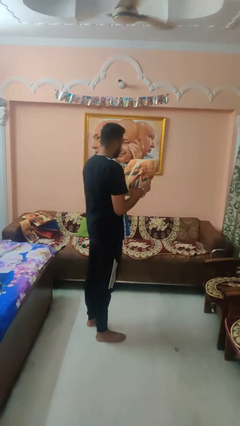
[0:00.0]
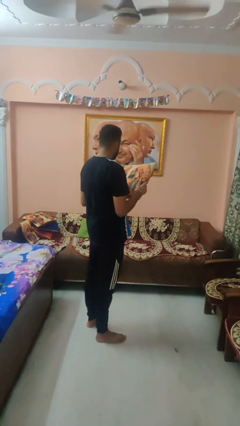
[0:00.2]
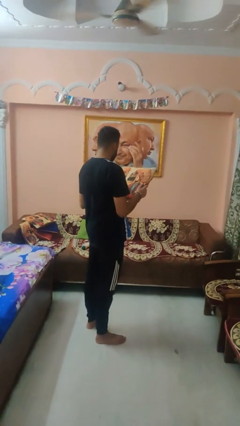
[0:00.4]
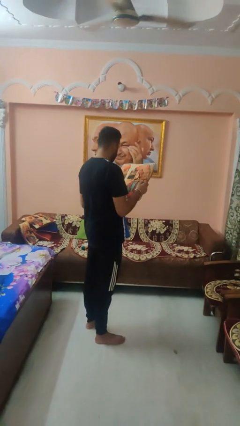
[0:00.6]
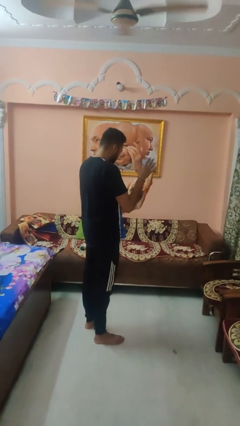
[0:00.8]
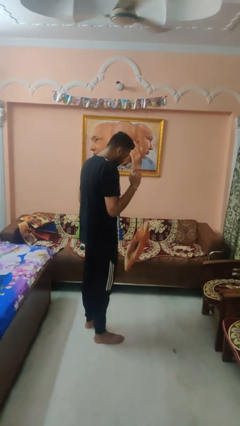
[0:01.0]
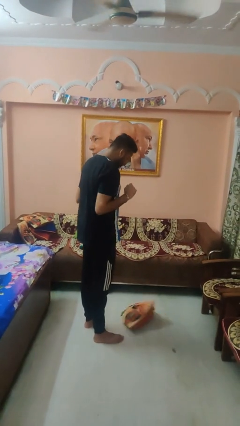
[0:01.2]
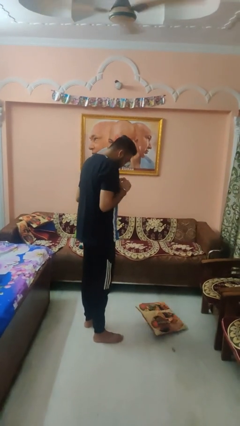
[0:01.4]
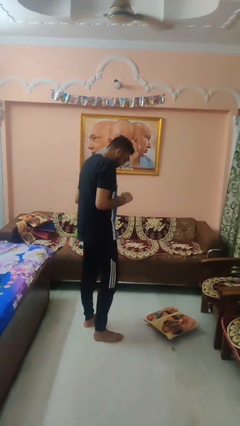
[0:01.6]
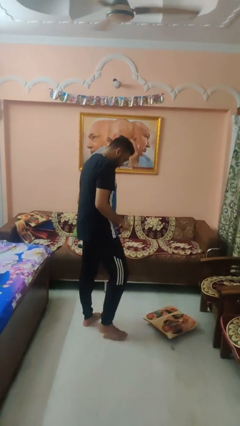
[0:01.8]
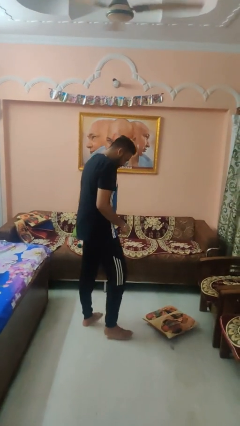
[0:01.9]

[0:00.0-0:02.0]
person drops object

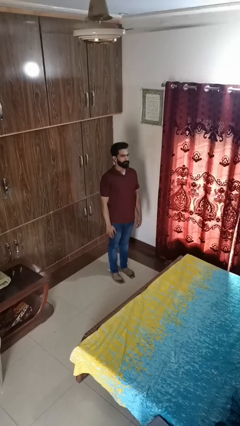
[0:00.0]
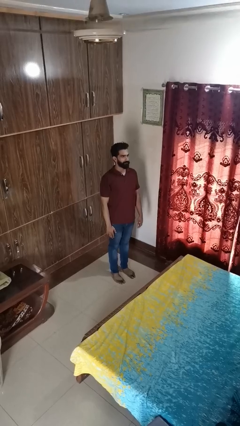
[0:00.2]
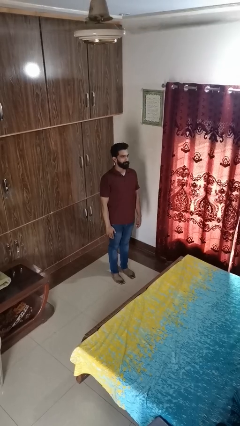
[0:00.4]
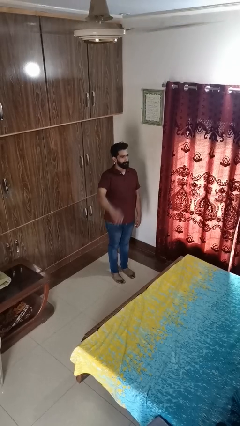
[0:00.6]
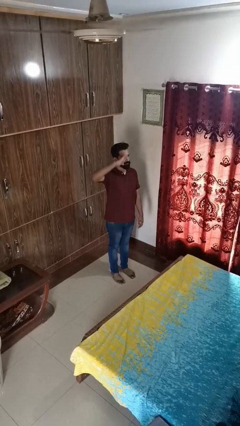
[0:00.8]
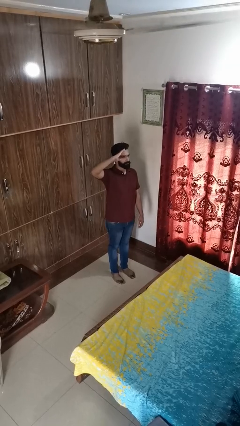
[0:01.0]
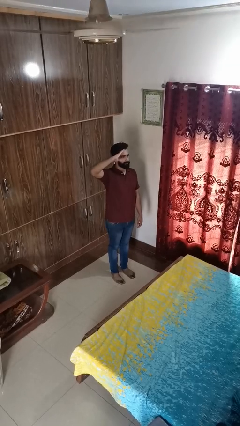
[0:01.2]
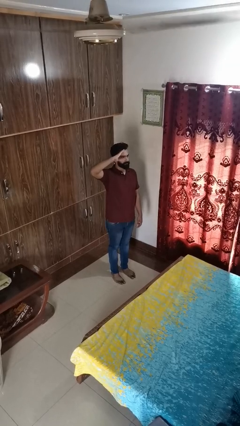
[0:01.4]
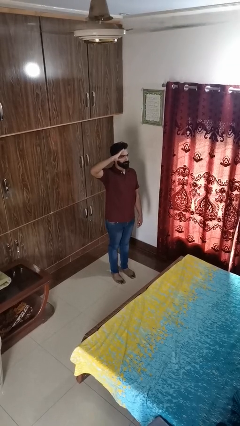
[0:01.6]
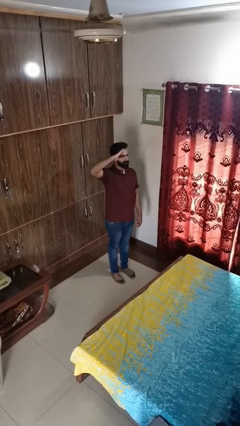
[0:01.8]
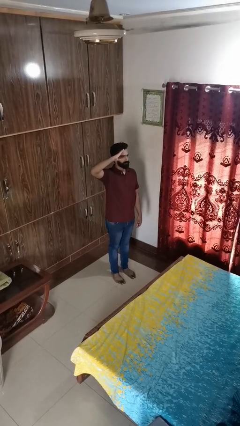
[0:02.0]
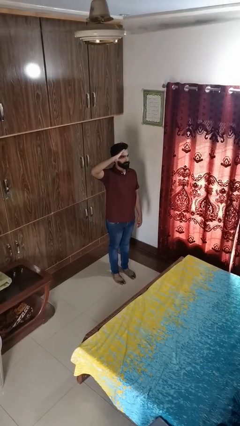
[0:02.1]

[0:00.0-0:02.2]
person salutes

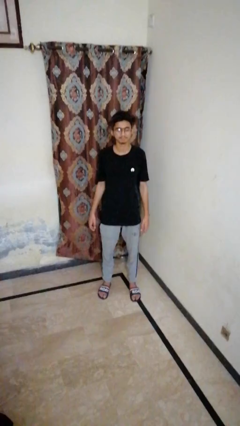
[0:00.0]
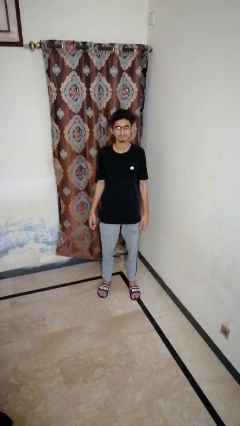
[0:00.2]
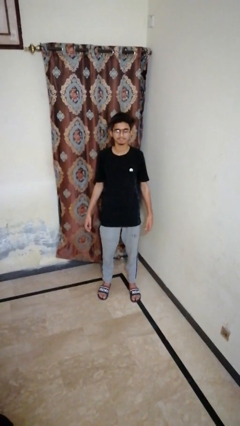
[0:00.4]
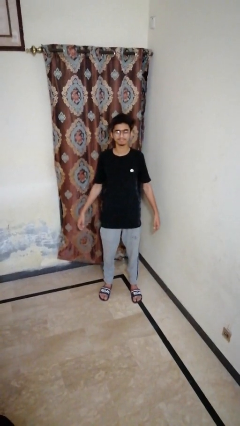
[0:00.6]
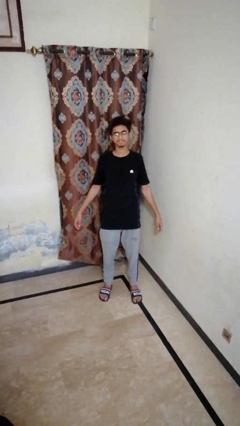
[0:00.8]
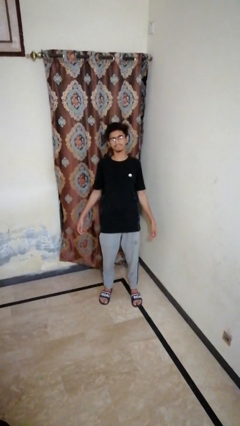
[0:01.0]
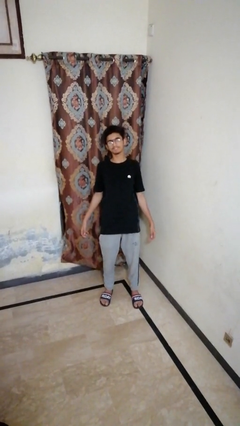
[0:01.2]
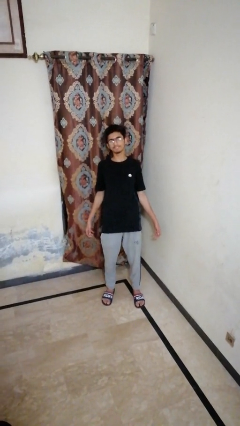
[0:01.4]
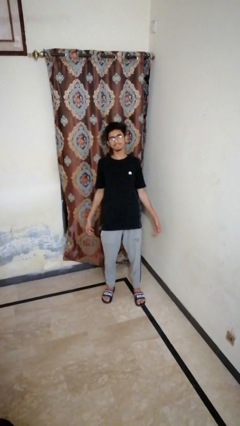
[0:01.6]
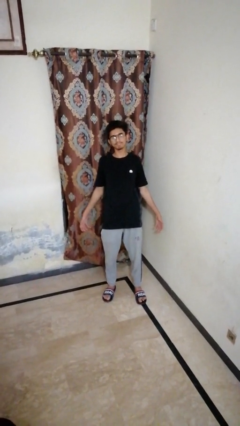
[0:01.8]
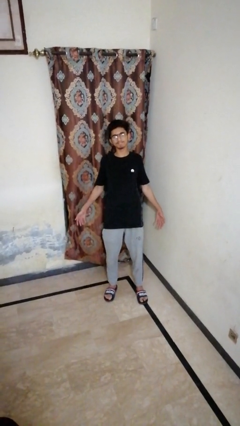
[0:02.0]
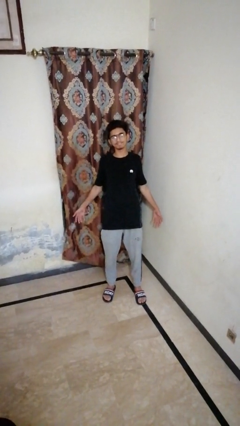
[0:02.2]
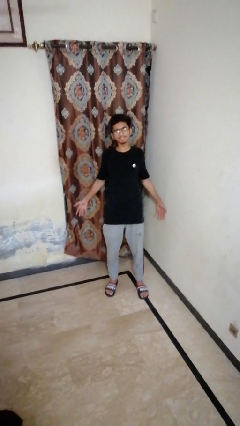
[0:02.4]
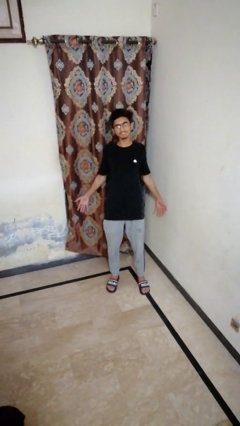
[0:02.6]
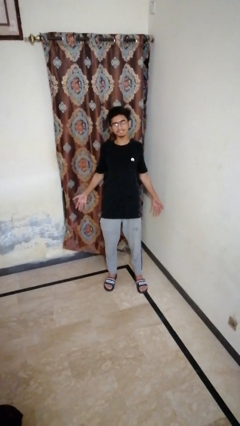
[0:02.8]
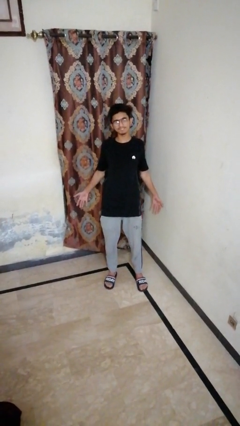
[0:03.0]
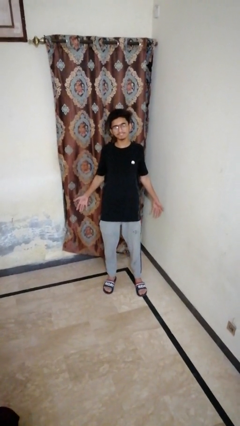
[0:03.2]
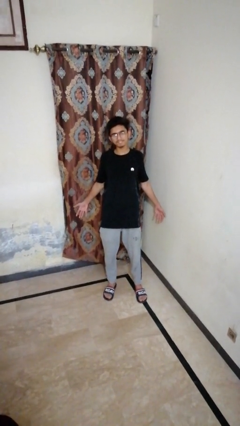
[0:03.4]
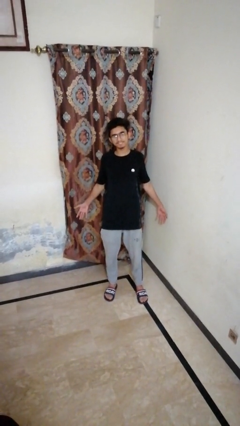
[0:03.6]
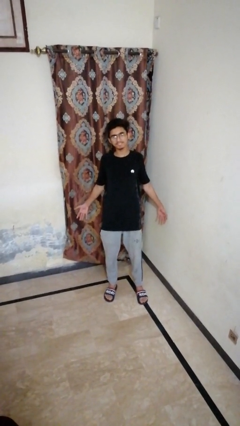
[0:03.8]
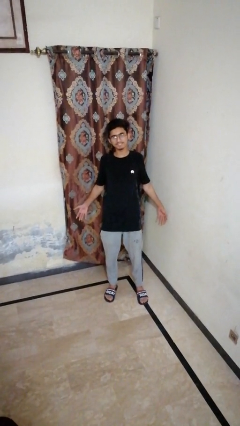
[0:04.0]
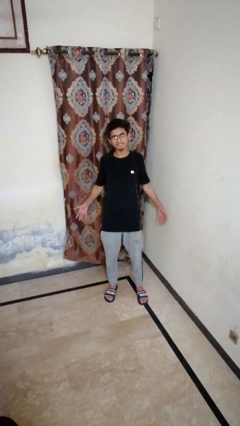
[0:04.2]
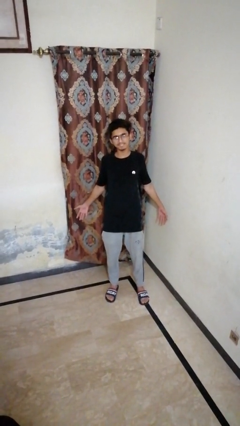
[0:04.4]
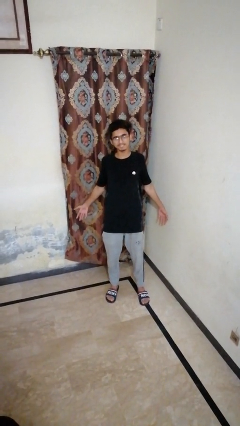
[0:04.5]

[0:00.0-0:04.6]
person stretches back

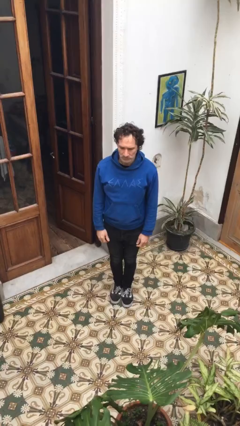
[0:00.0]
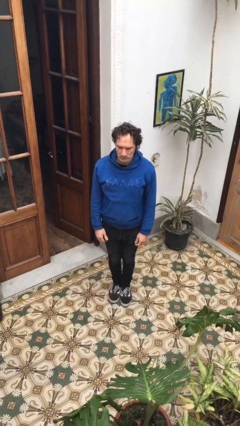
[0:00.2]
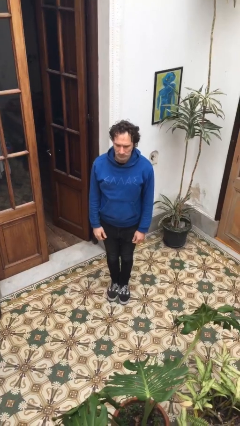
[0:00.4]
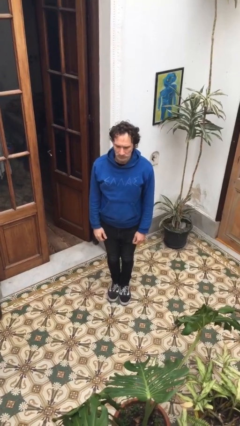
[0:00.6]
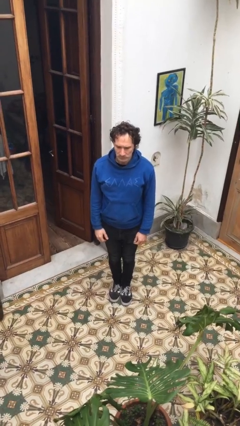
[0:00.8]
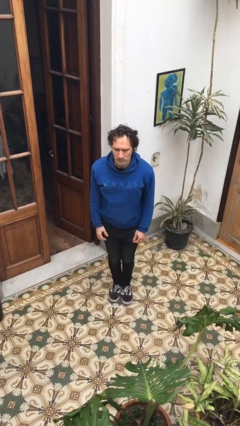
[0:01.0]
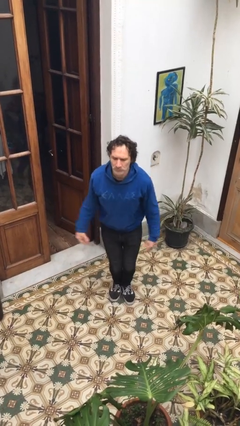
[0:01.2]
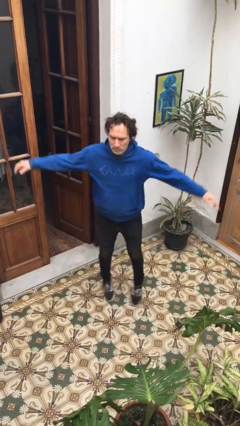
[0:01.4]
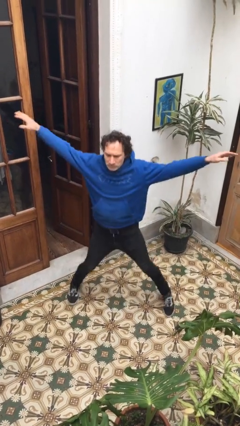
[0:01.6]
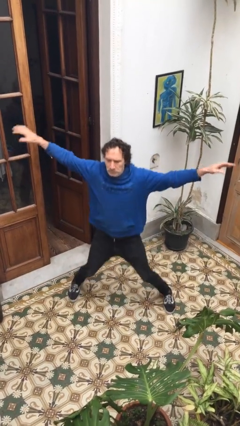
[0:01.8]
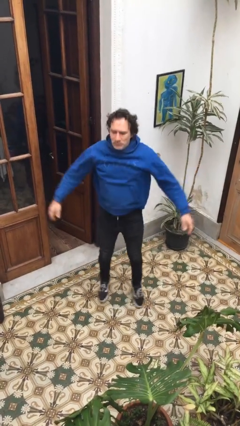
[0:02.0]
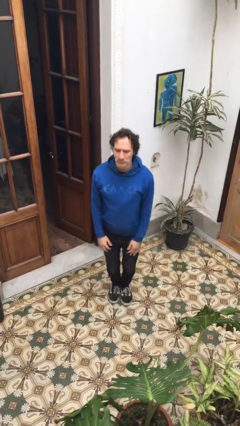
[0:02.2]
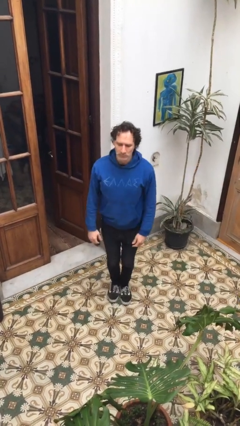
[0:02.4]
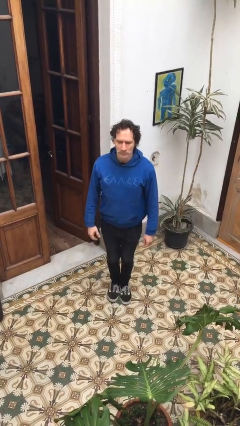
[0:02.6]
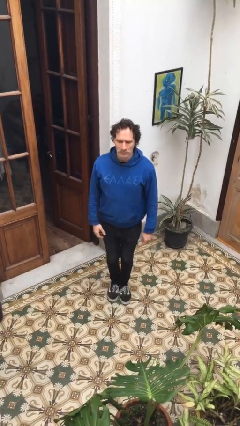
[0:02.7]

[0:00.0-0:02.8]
person exercises with jumping jacks

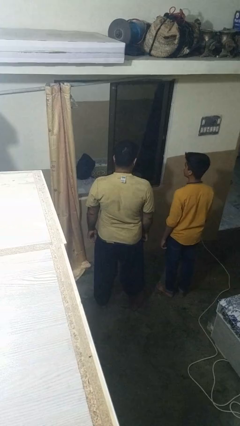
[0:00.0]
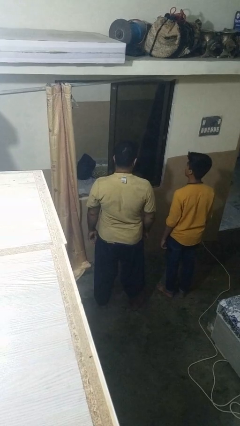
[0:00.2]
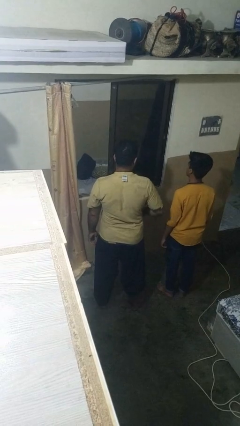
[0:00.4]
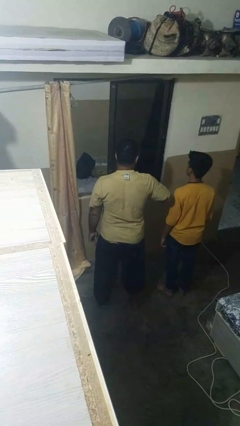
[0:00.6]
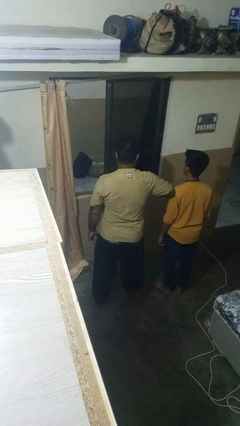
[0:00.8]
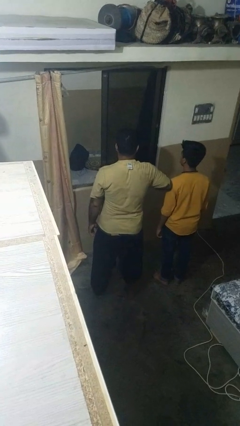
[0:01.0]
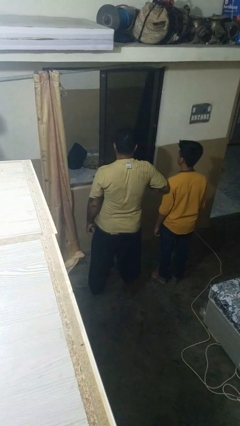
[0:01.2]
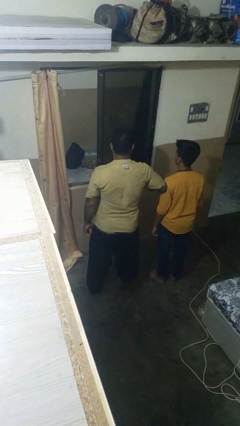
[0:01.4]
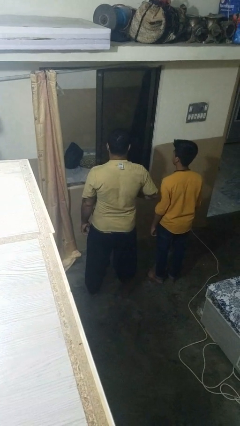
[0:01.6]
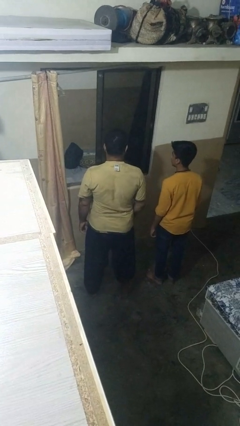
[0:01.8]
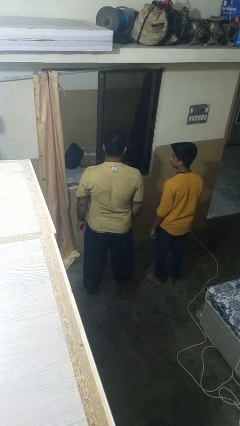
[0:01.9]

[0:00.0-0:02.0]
person nudges person with elbow

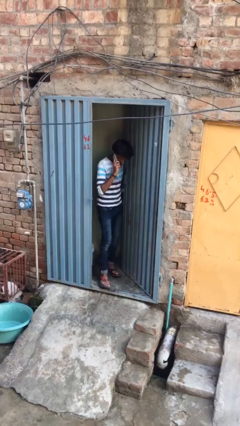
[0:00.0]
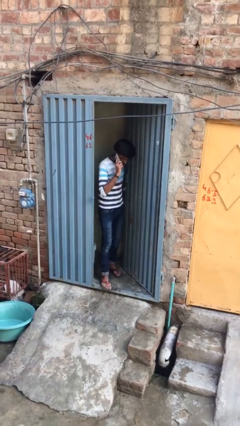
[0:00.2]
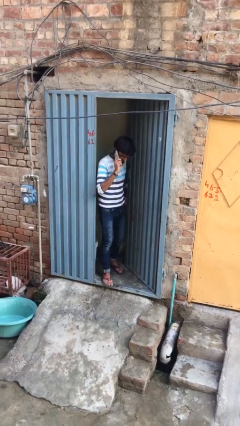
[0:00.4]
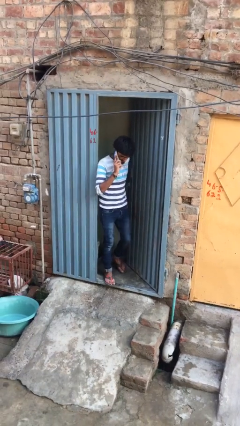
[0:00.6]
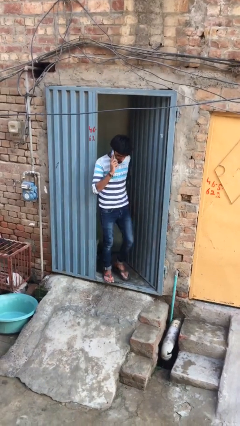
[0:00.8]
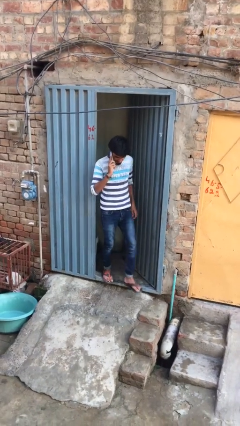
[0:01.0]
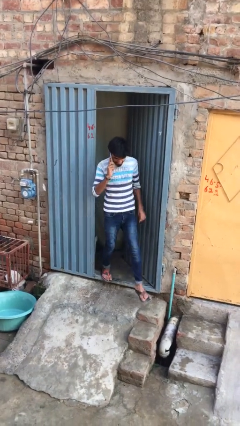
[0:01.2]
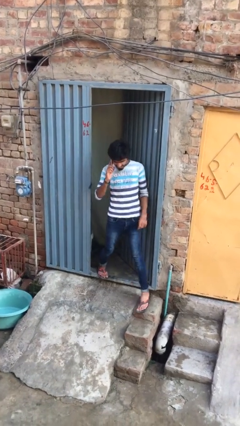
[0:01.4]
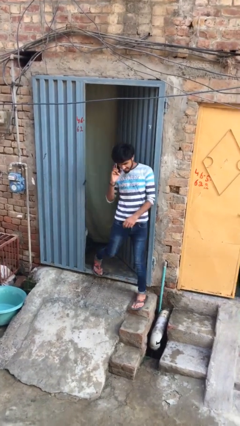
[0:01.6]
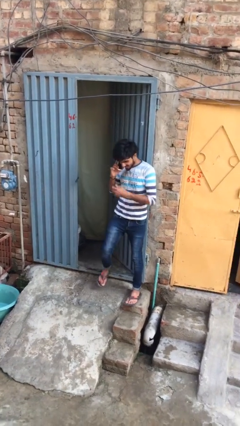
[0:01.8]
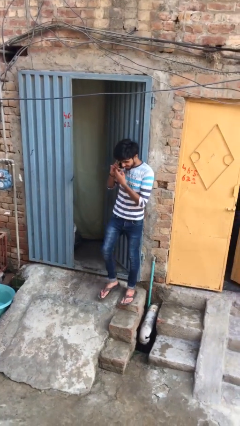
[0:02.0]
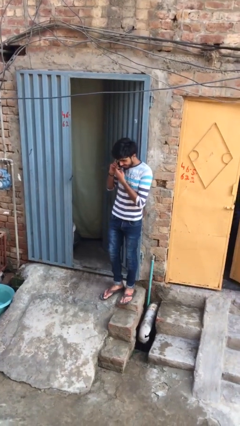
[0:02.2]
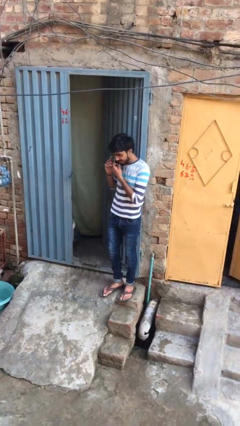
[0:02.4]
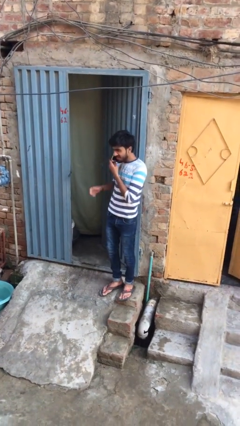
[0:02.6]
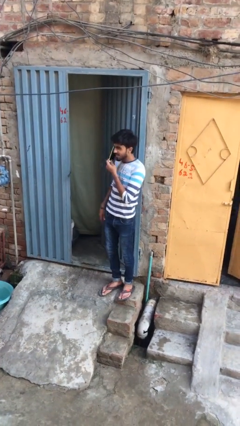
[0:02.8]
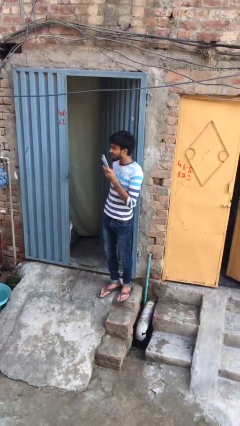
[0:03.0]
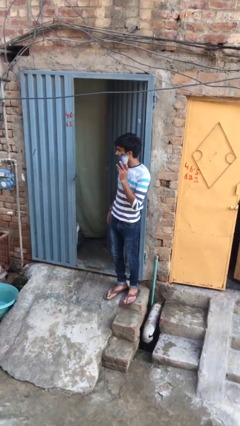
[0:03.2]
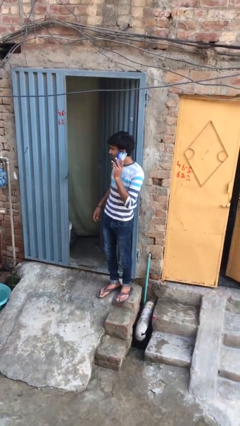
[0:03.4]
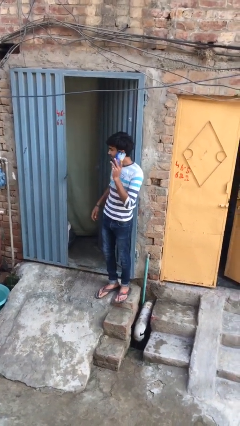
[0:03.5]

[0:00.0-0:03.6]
person enters scene through structure
